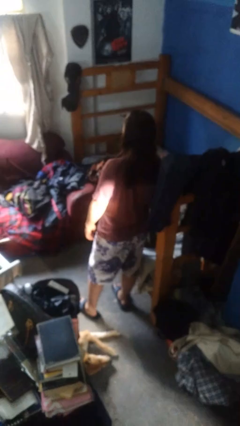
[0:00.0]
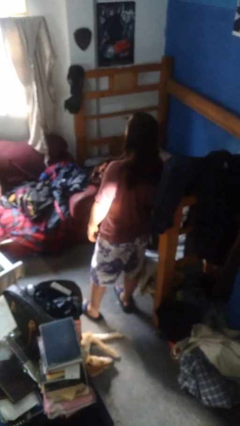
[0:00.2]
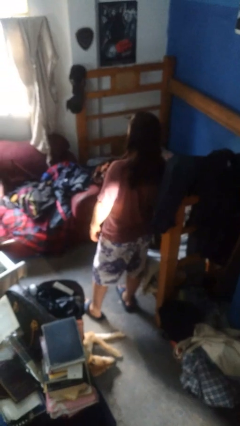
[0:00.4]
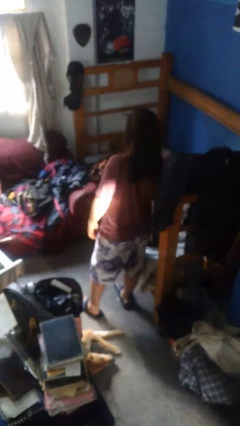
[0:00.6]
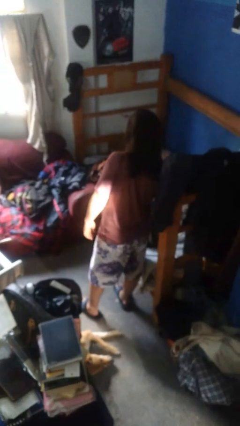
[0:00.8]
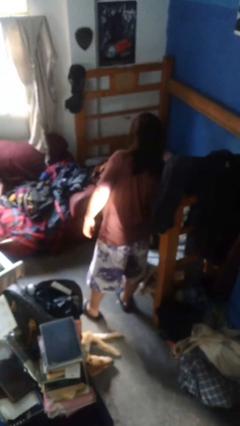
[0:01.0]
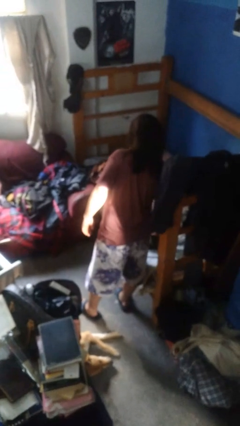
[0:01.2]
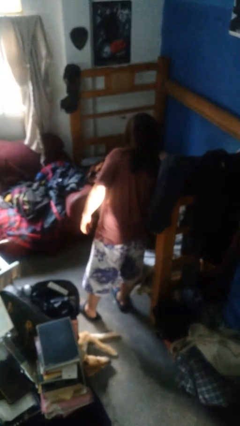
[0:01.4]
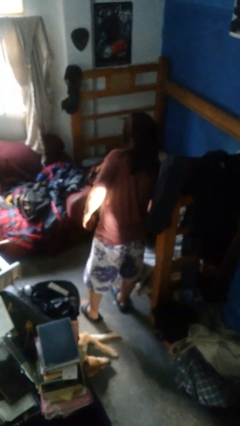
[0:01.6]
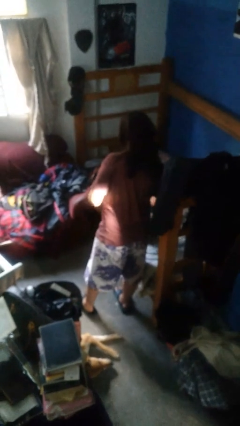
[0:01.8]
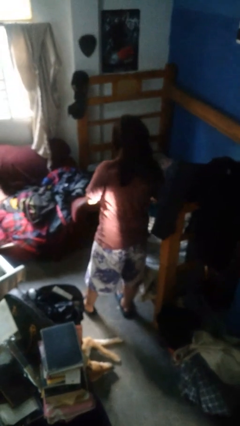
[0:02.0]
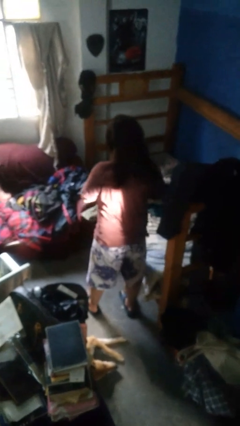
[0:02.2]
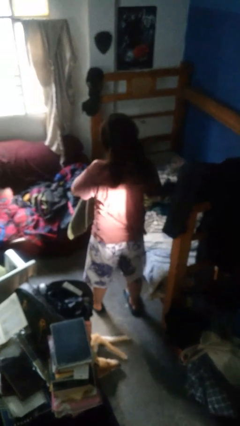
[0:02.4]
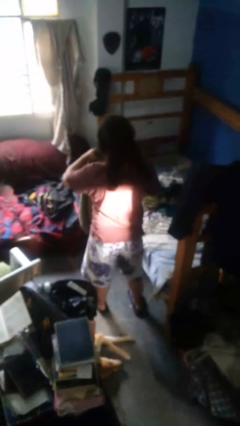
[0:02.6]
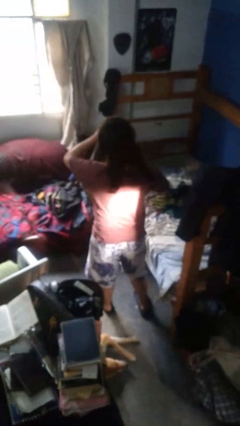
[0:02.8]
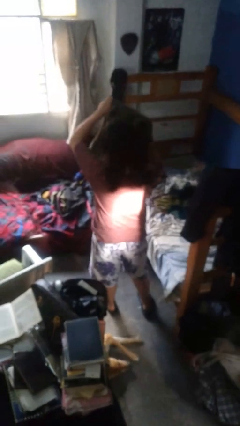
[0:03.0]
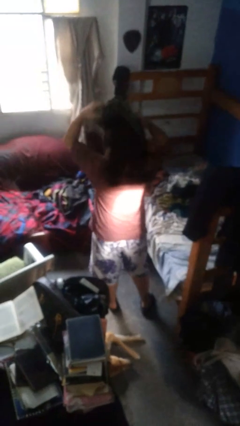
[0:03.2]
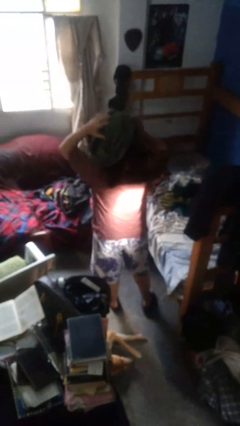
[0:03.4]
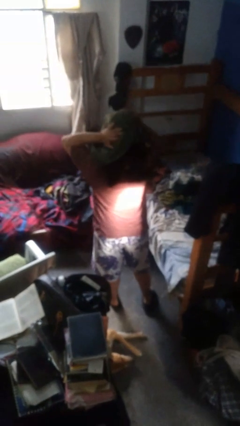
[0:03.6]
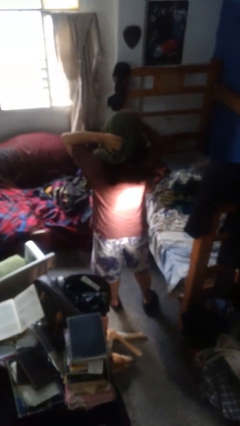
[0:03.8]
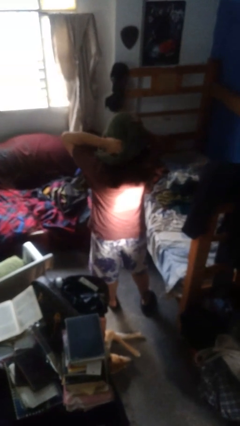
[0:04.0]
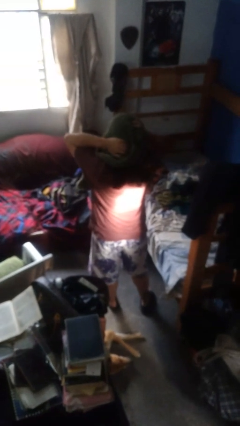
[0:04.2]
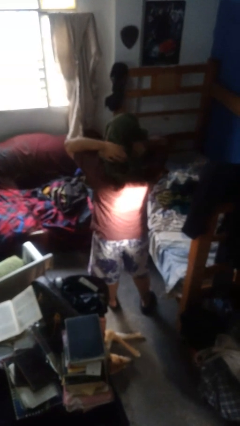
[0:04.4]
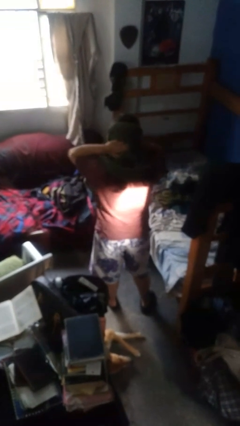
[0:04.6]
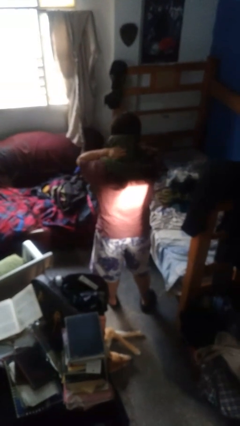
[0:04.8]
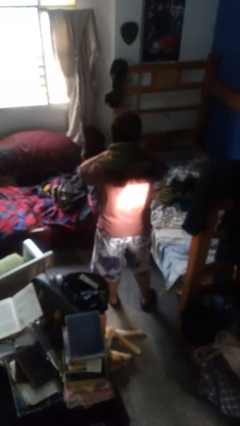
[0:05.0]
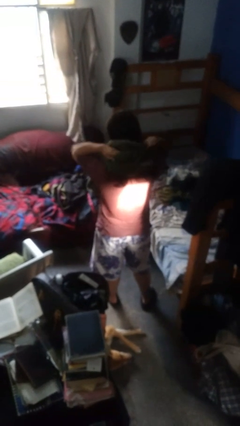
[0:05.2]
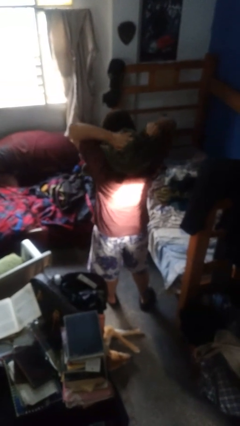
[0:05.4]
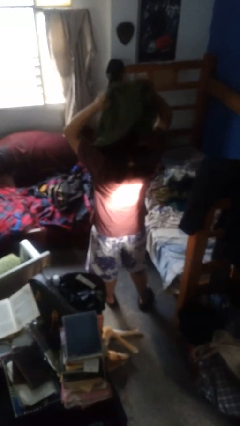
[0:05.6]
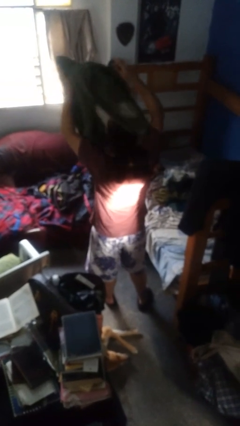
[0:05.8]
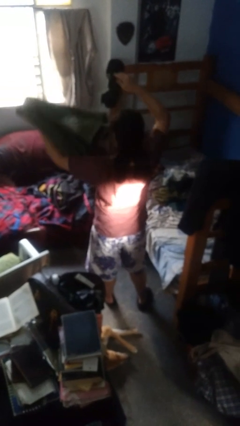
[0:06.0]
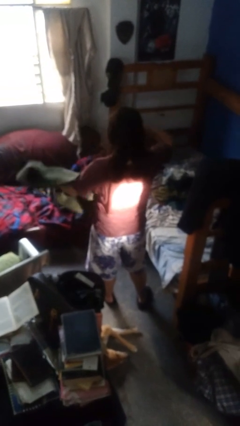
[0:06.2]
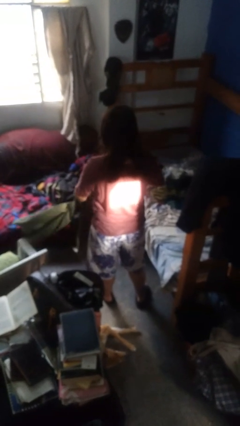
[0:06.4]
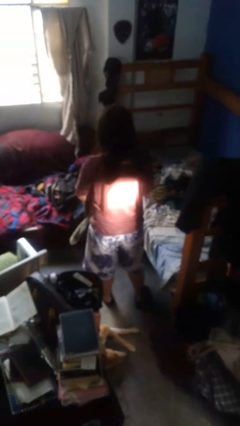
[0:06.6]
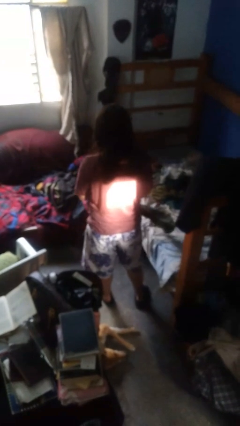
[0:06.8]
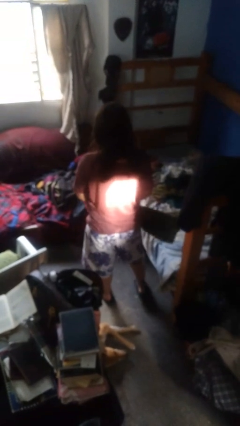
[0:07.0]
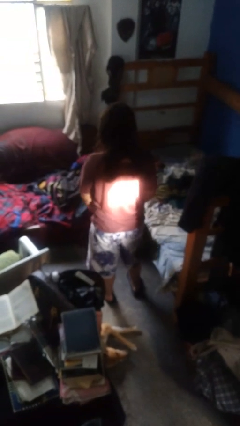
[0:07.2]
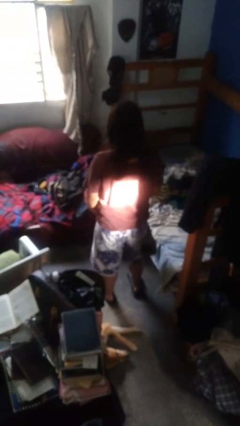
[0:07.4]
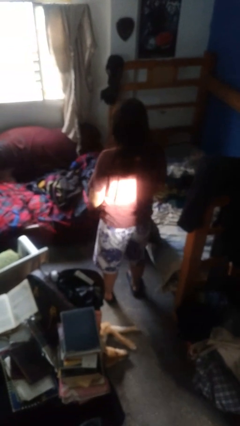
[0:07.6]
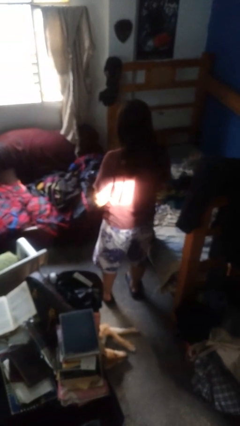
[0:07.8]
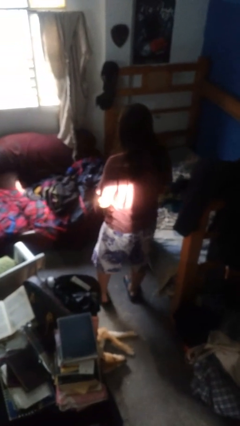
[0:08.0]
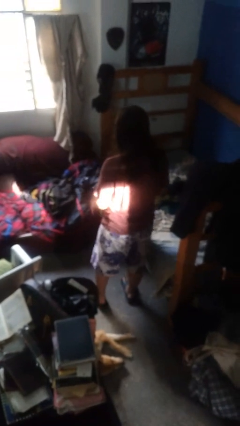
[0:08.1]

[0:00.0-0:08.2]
person dries hair with towel

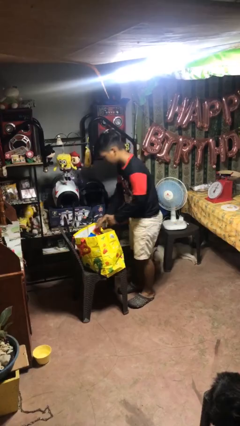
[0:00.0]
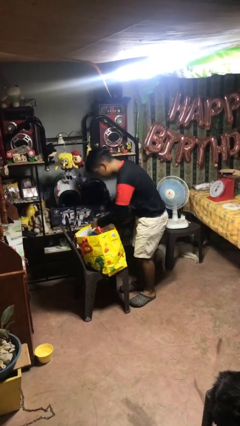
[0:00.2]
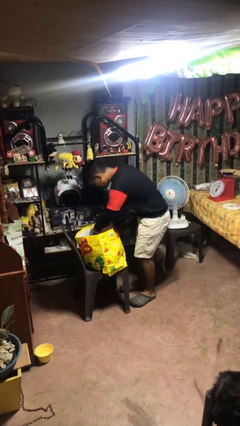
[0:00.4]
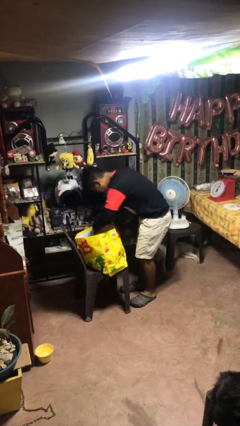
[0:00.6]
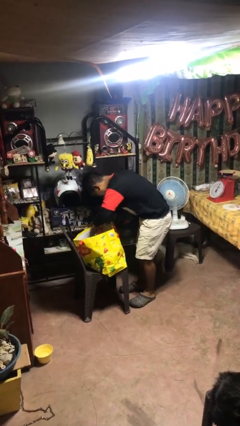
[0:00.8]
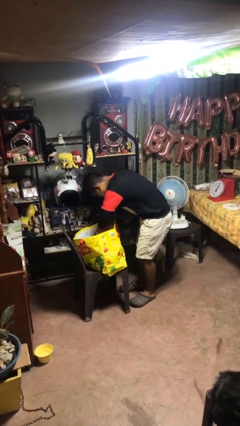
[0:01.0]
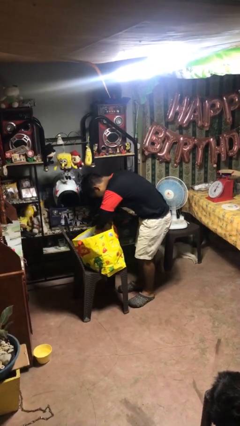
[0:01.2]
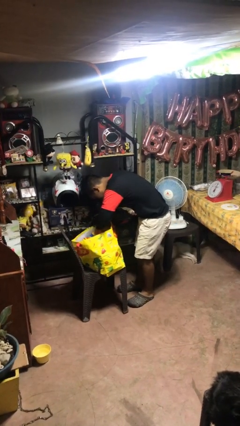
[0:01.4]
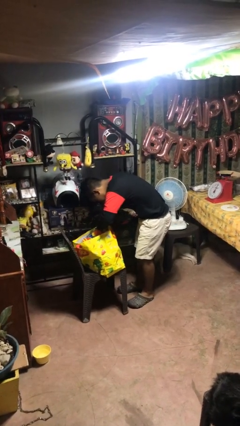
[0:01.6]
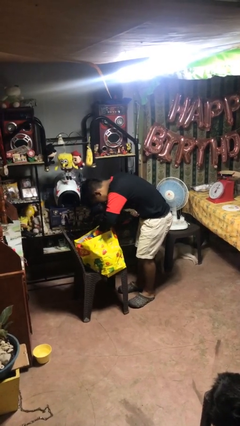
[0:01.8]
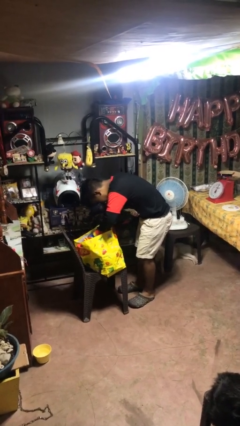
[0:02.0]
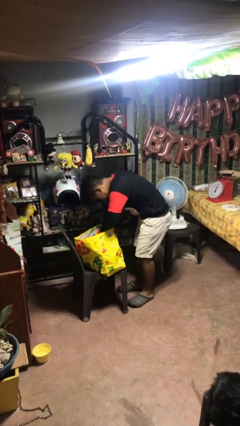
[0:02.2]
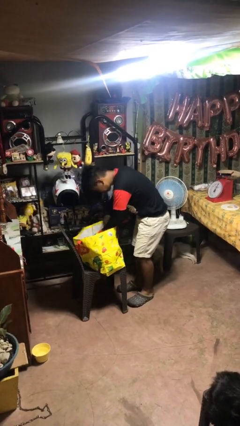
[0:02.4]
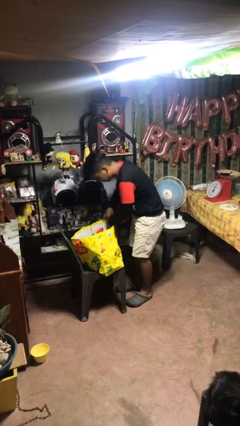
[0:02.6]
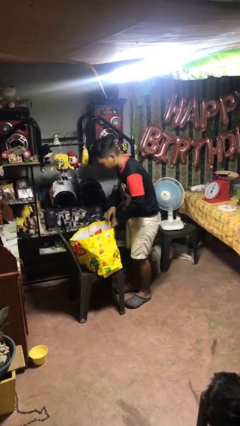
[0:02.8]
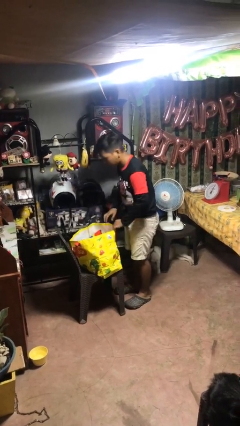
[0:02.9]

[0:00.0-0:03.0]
person searches in bag

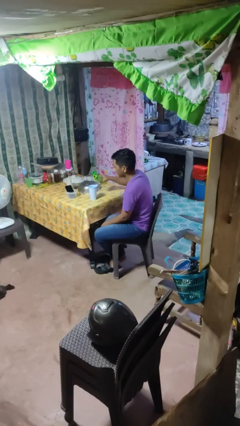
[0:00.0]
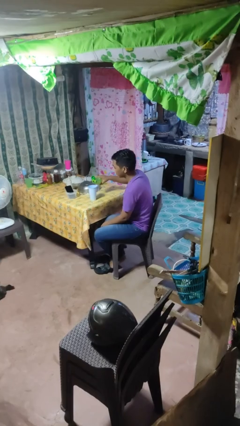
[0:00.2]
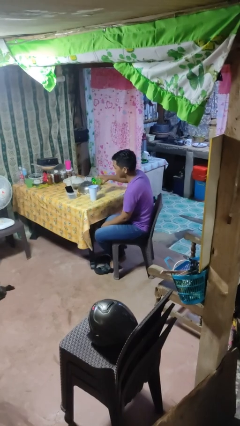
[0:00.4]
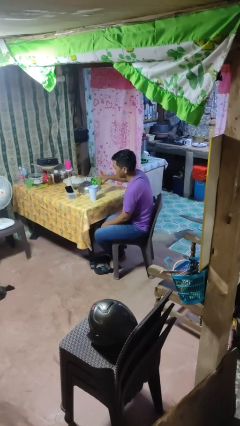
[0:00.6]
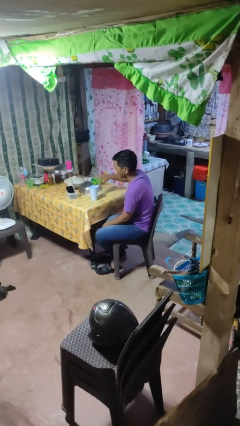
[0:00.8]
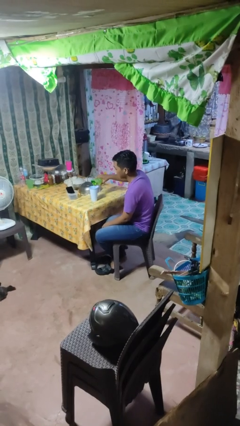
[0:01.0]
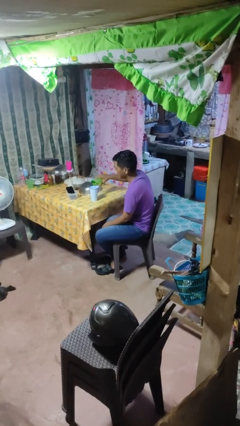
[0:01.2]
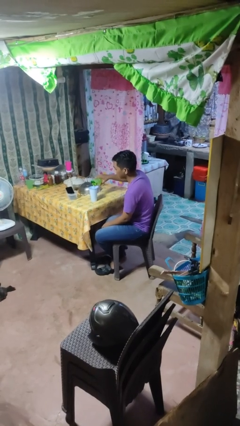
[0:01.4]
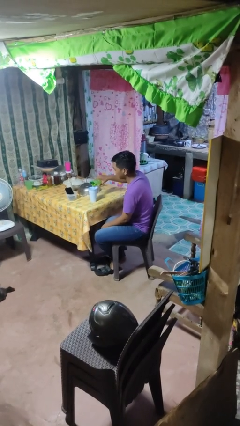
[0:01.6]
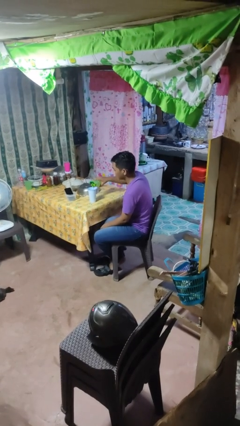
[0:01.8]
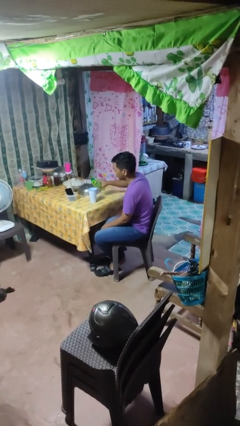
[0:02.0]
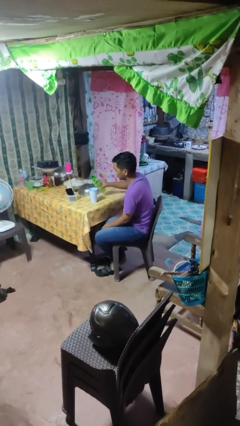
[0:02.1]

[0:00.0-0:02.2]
person pours liquid into cup

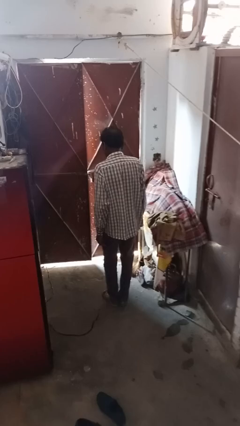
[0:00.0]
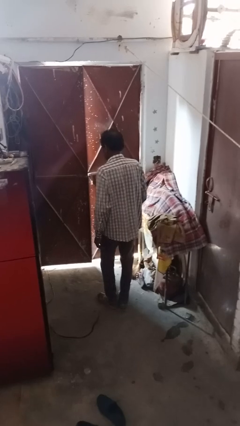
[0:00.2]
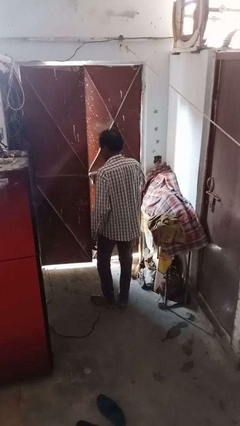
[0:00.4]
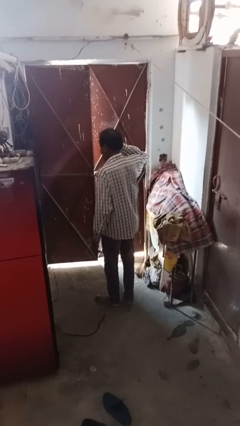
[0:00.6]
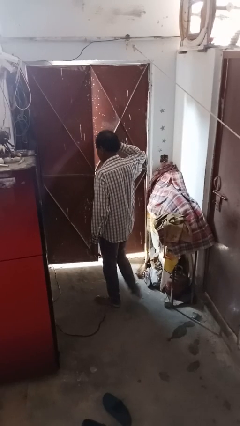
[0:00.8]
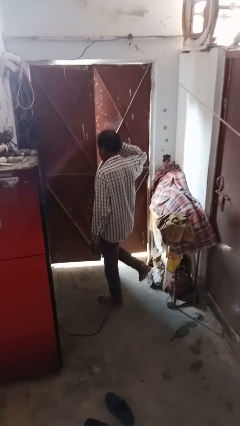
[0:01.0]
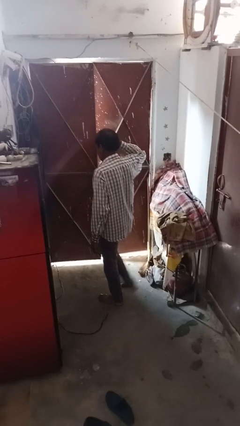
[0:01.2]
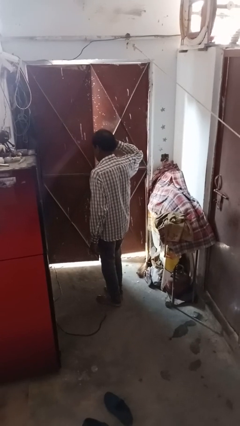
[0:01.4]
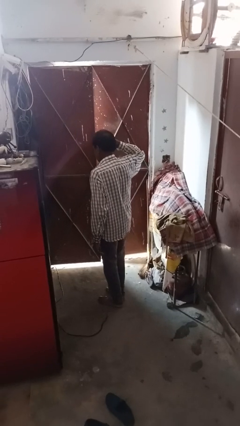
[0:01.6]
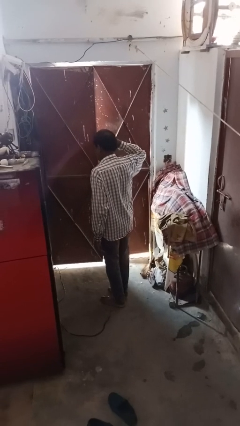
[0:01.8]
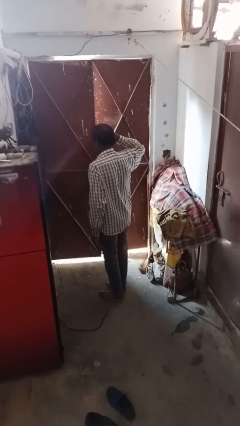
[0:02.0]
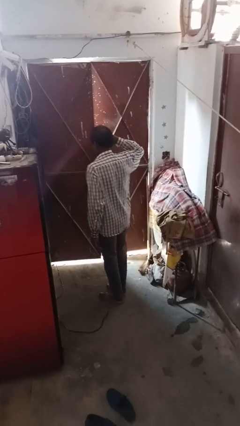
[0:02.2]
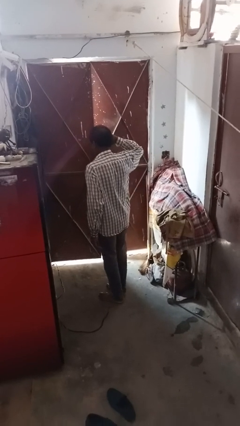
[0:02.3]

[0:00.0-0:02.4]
person salutes

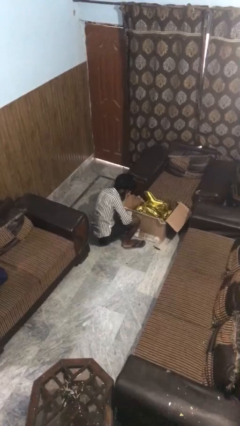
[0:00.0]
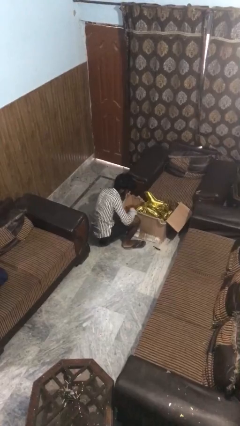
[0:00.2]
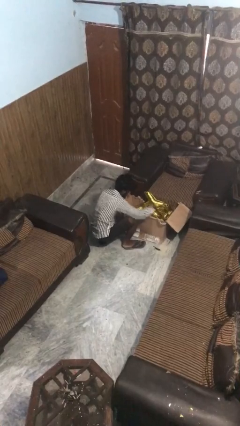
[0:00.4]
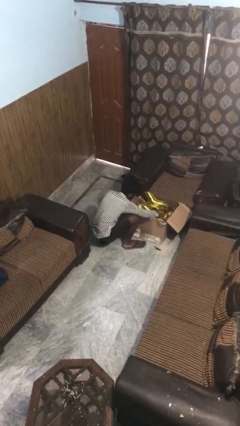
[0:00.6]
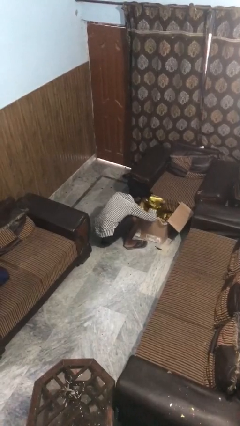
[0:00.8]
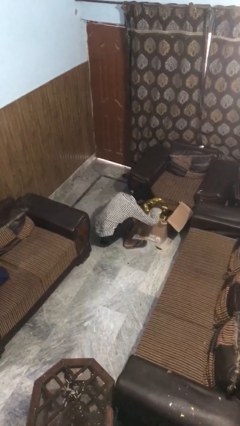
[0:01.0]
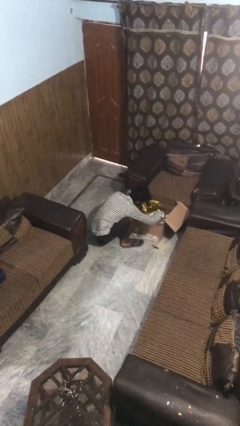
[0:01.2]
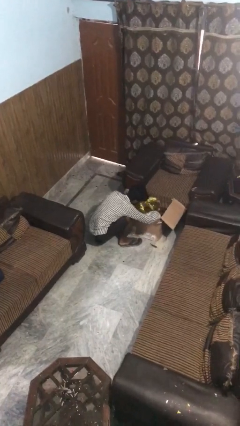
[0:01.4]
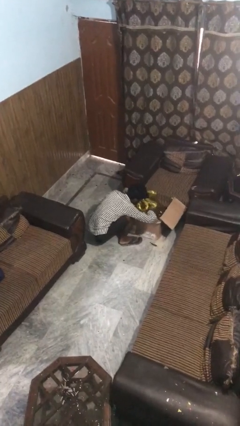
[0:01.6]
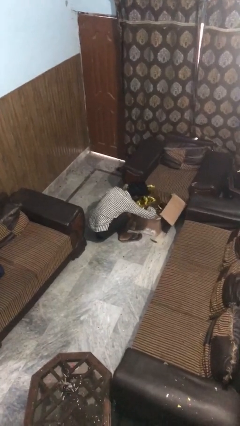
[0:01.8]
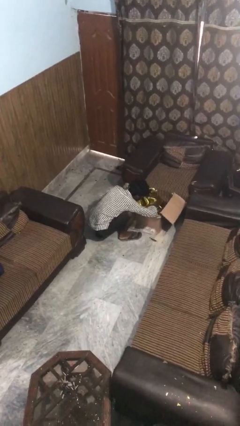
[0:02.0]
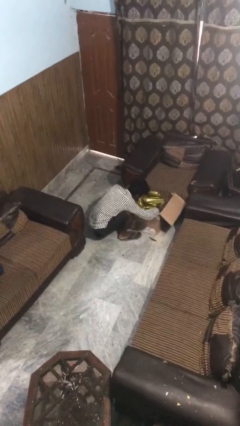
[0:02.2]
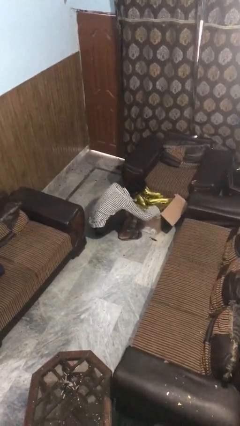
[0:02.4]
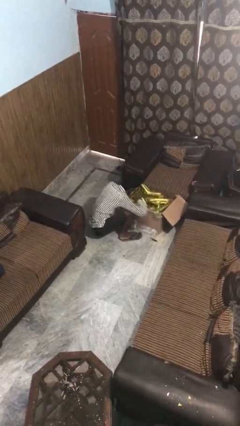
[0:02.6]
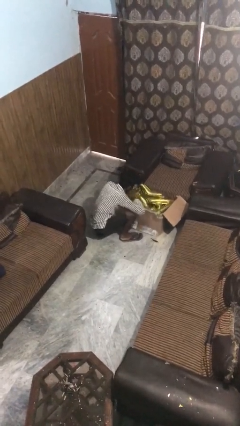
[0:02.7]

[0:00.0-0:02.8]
person searches in box
